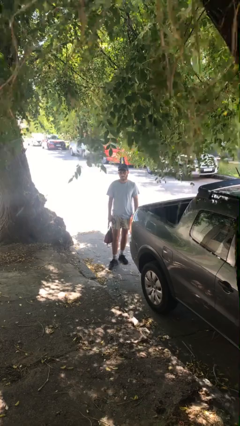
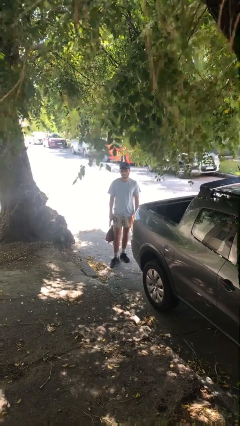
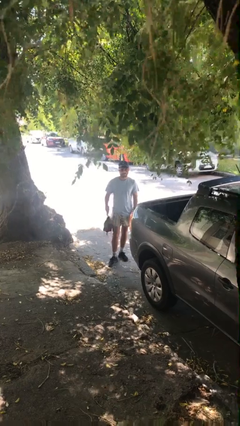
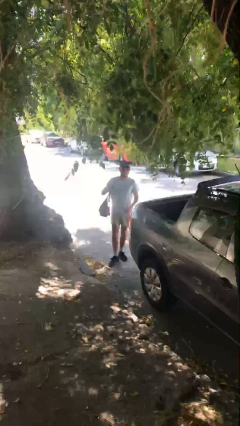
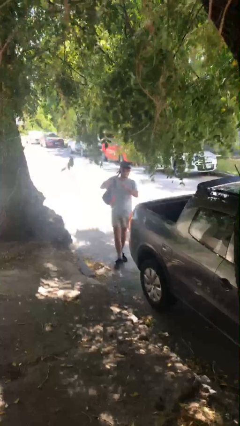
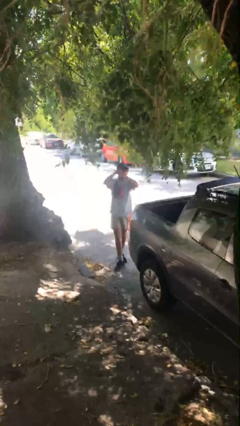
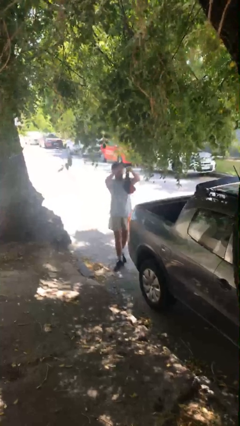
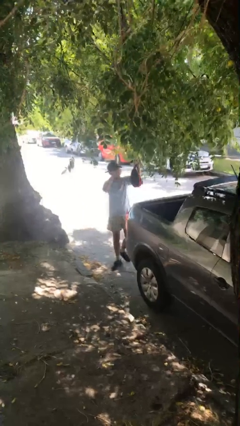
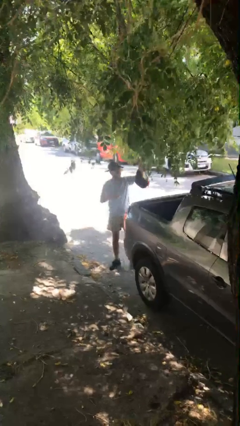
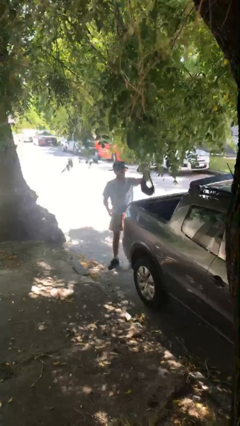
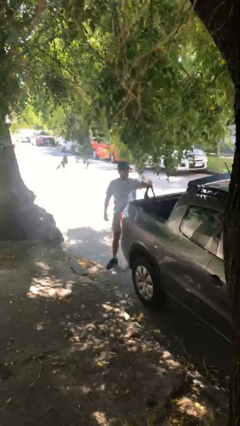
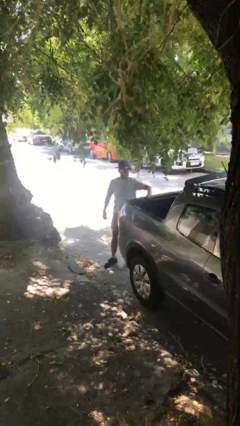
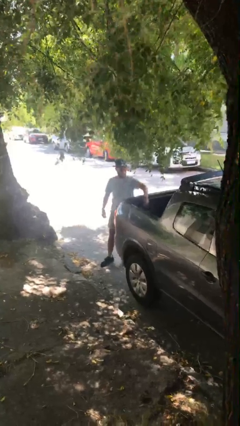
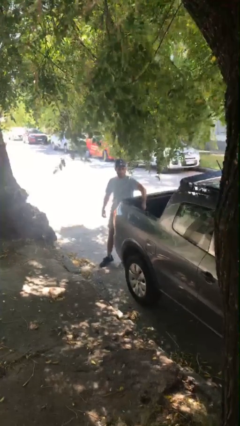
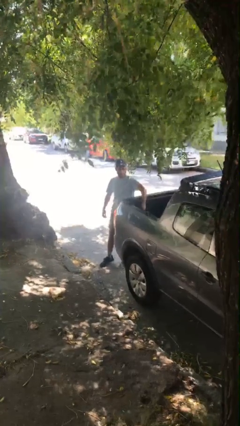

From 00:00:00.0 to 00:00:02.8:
person loads car

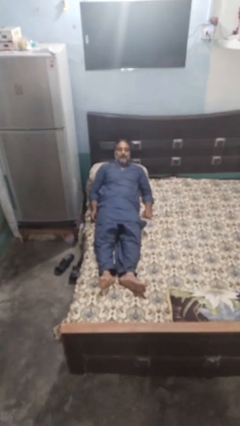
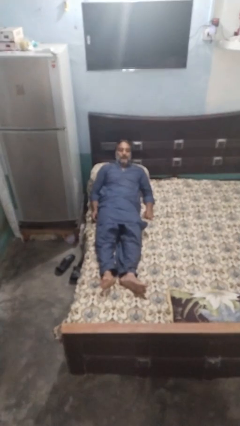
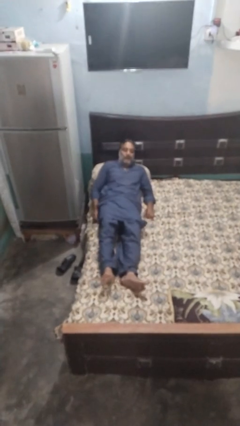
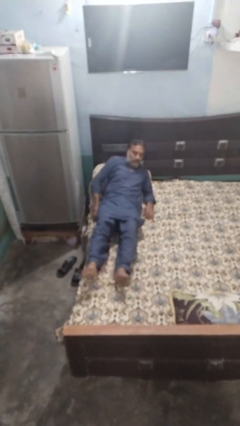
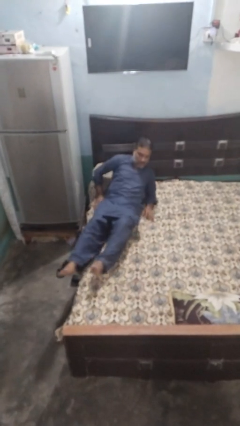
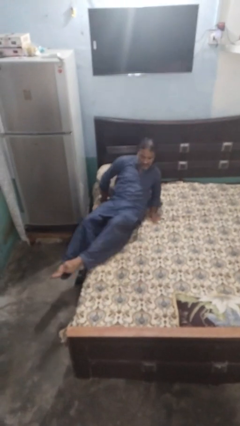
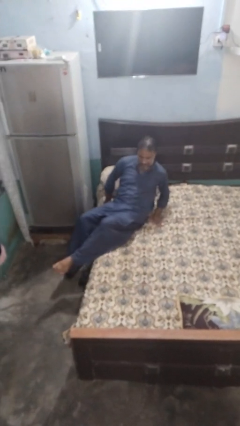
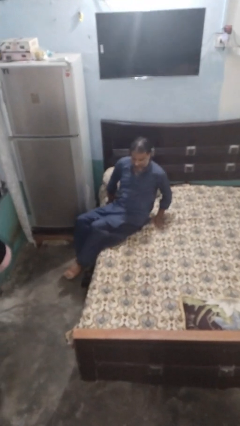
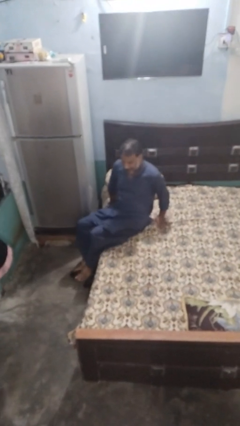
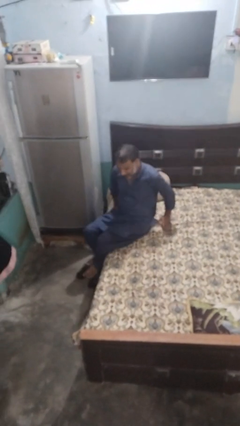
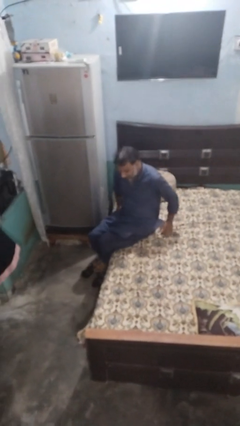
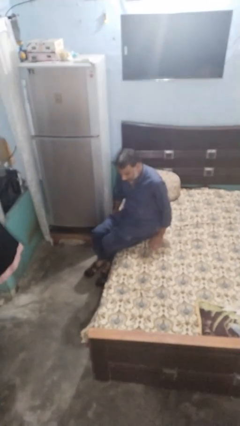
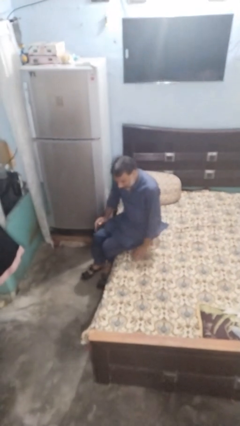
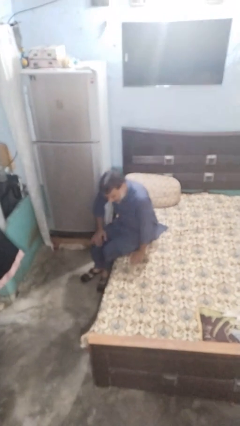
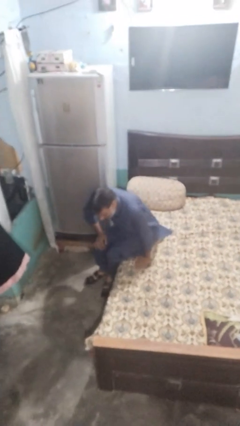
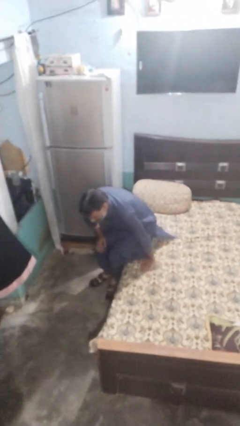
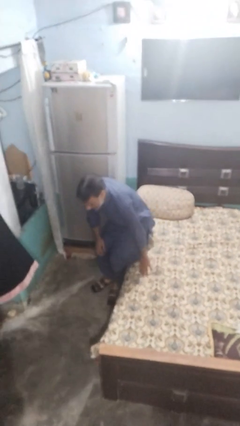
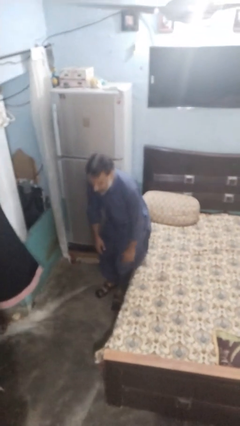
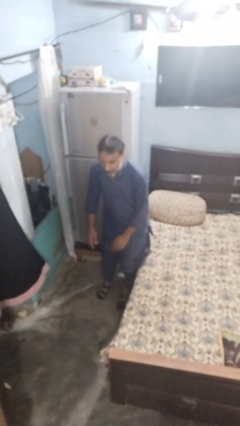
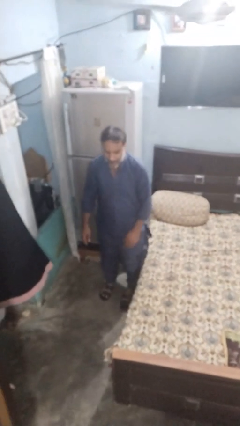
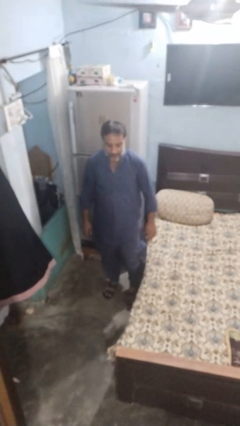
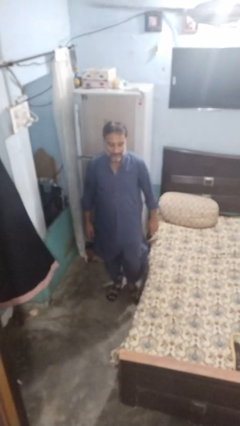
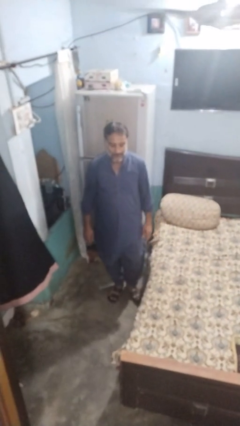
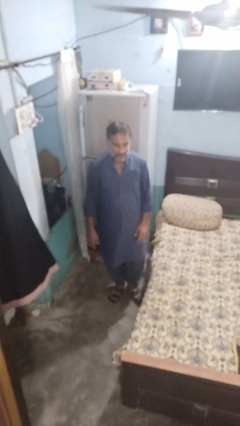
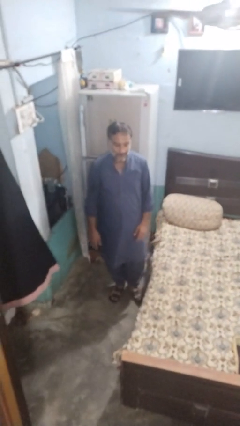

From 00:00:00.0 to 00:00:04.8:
person stands up

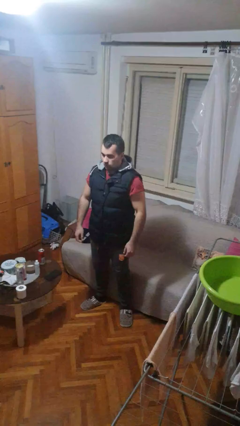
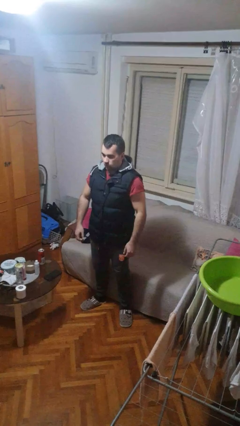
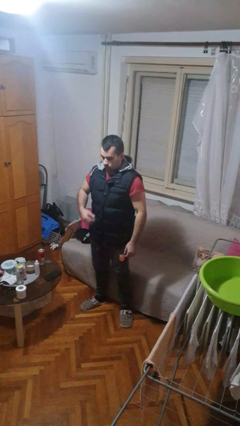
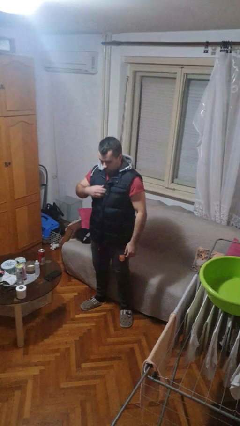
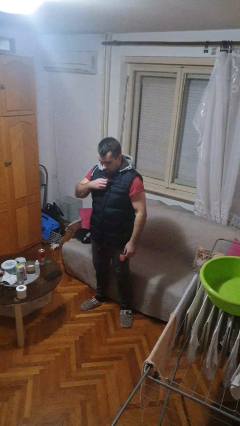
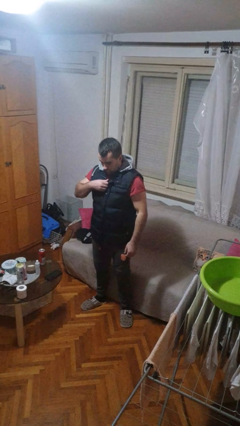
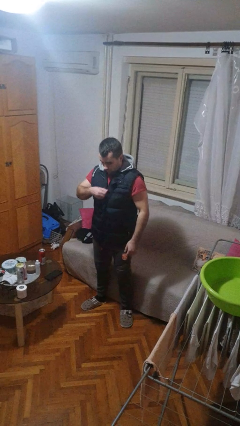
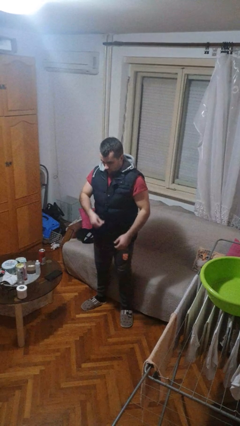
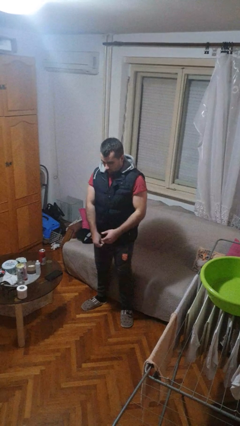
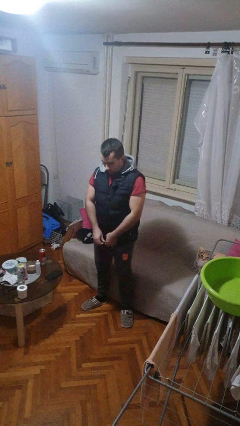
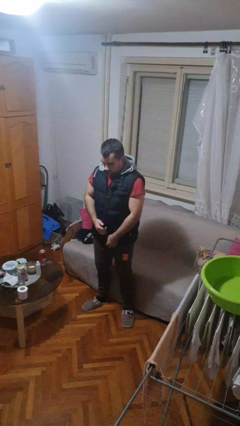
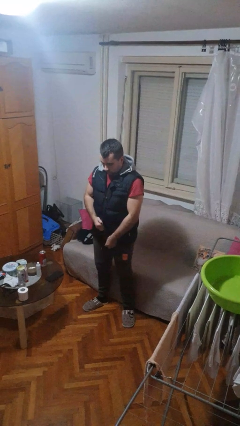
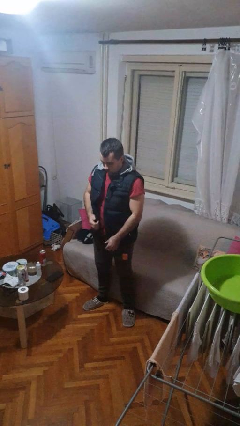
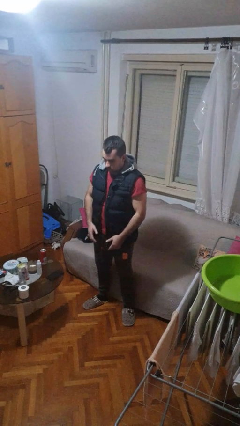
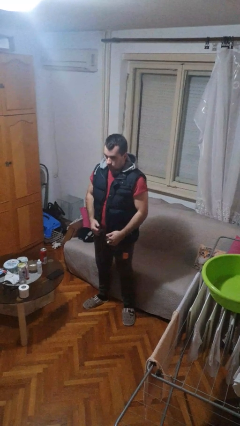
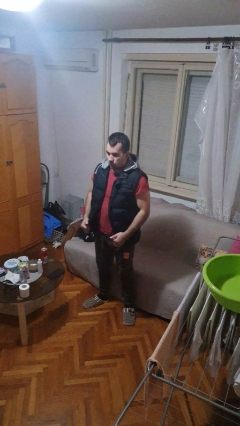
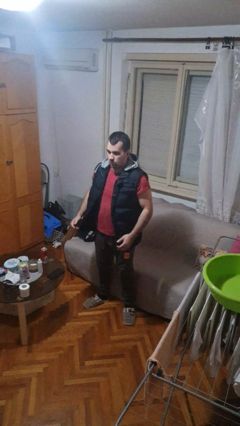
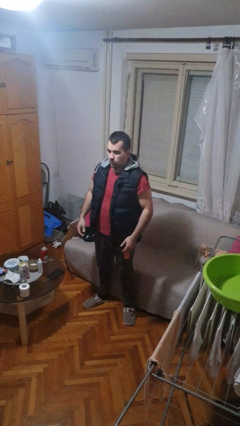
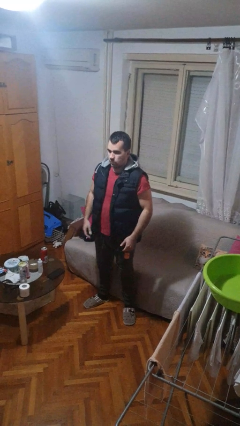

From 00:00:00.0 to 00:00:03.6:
person unzips jacket

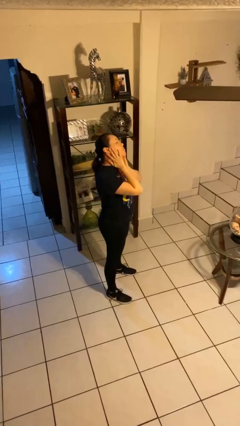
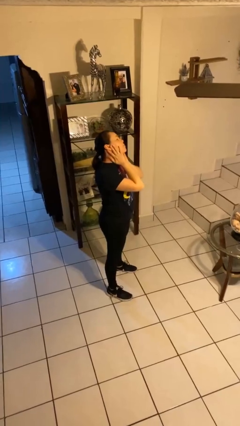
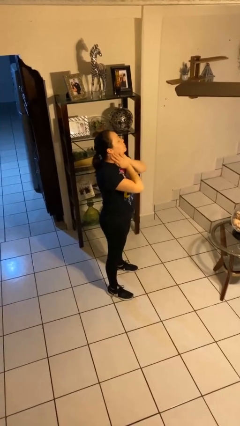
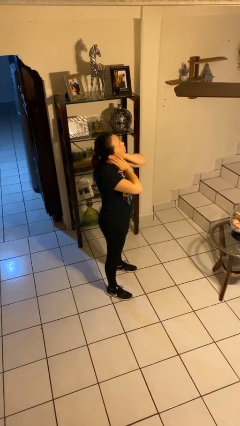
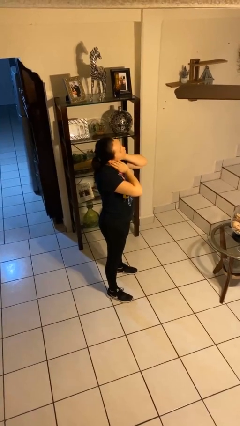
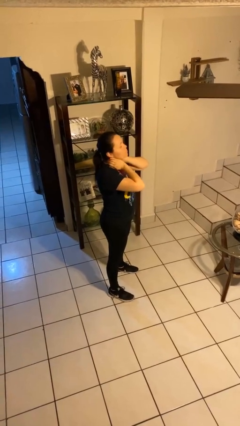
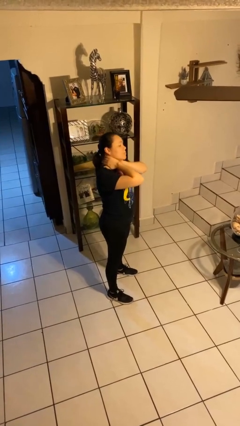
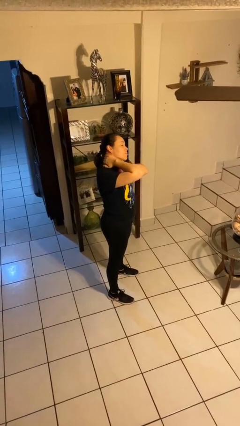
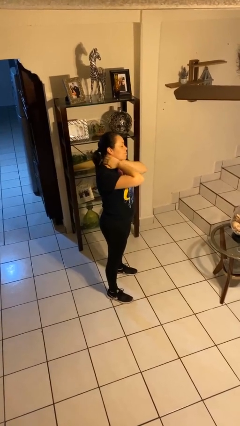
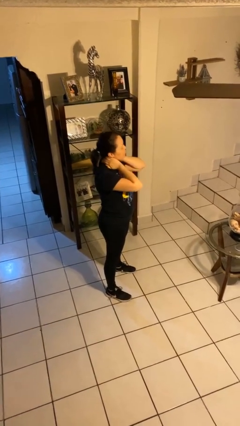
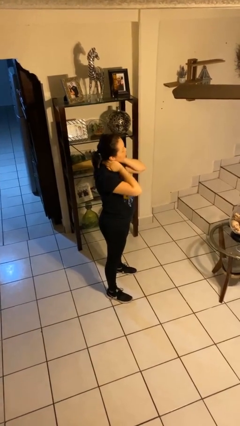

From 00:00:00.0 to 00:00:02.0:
person rubs neck

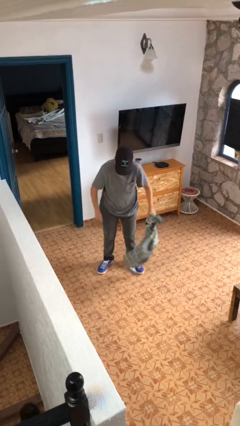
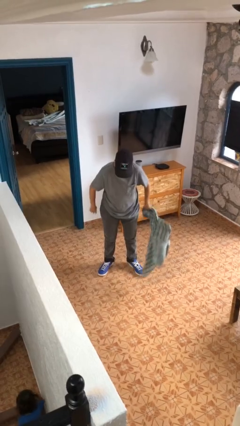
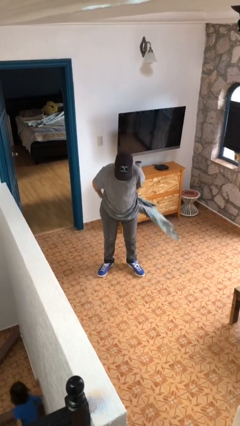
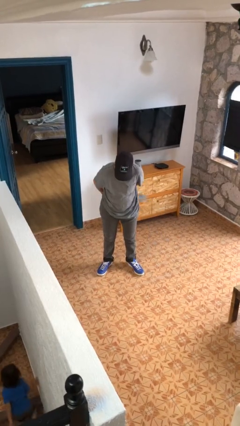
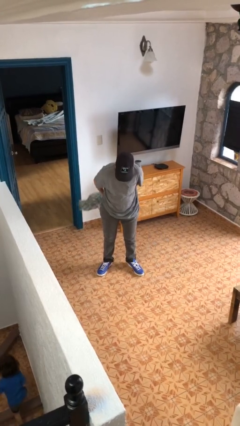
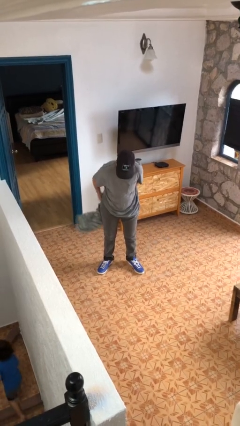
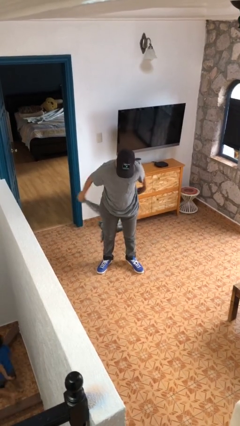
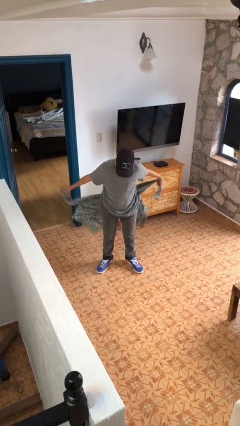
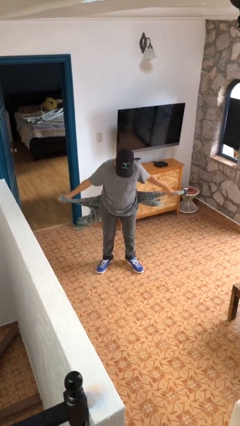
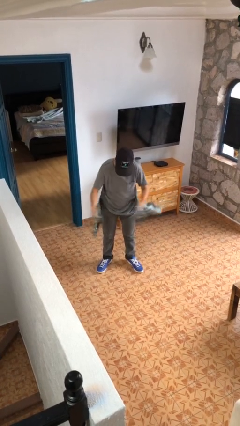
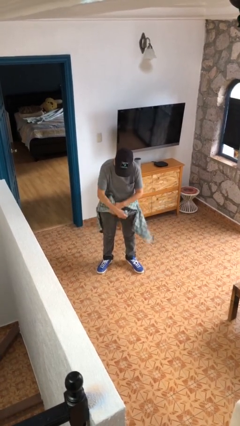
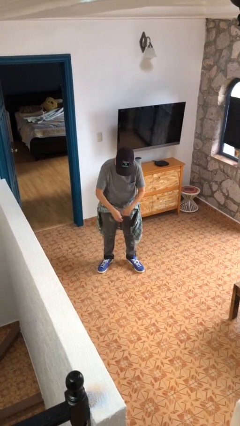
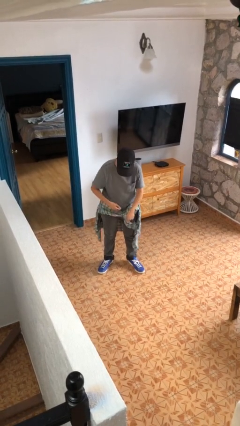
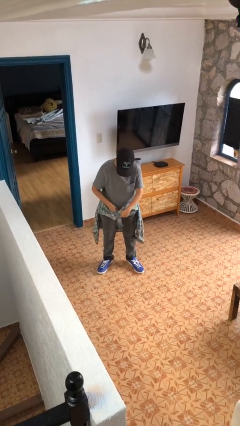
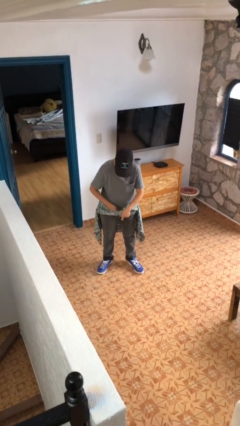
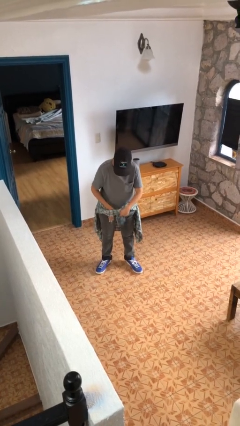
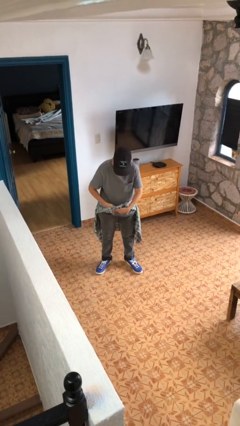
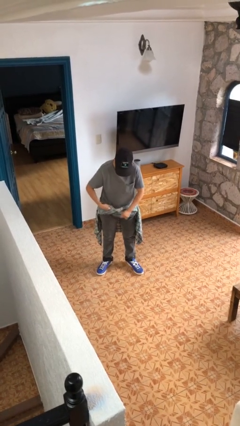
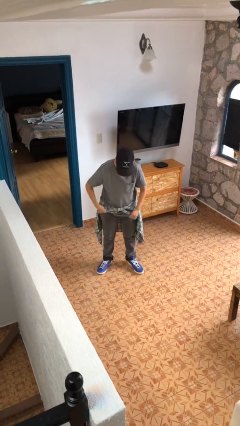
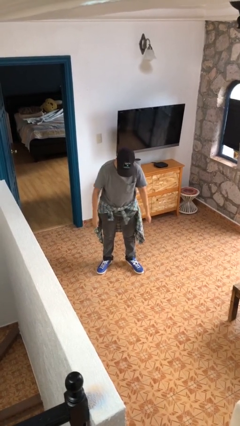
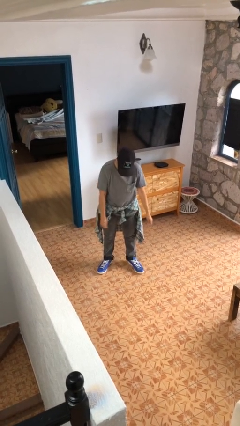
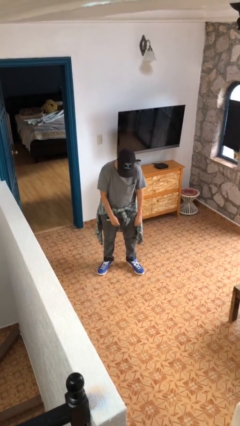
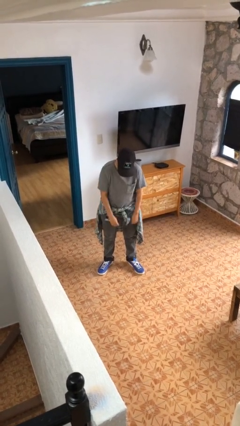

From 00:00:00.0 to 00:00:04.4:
person ties jacket around waist
